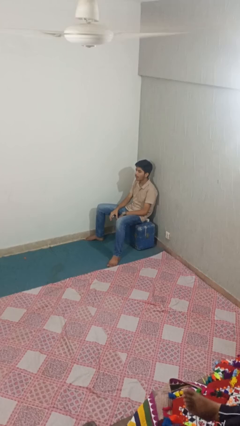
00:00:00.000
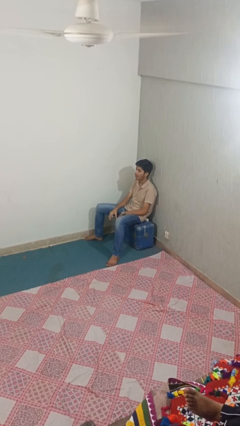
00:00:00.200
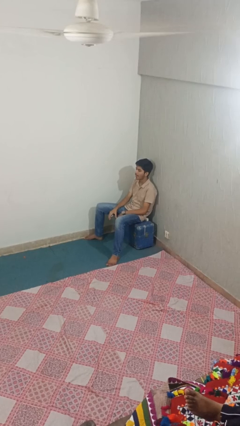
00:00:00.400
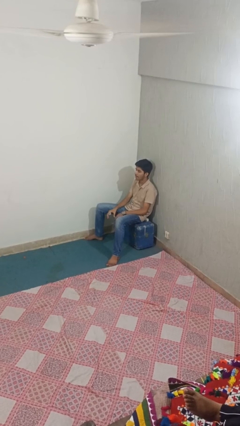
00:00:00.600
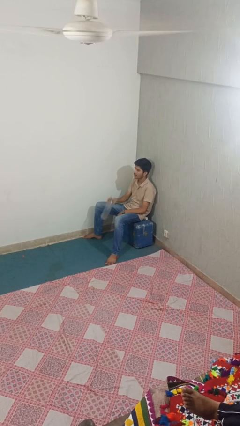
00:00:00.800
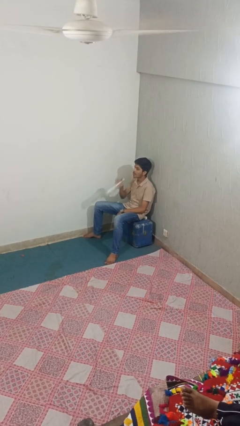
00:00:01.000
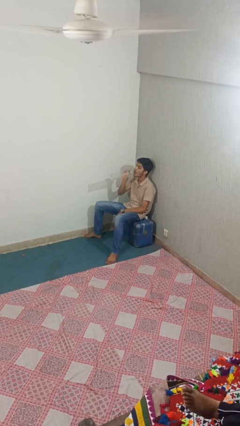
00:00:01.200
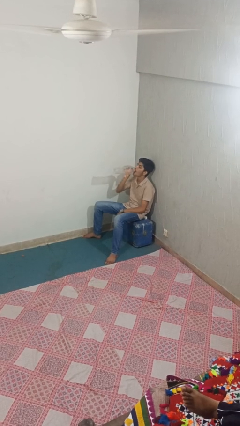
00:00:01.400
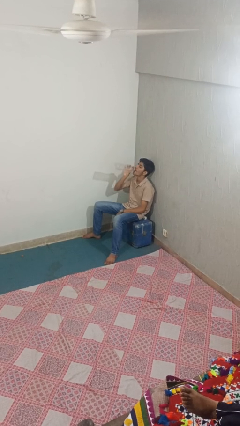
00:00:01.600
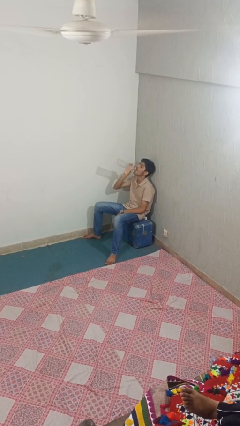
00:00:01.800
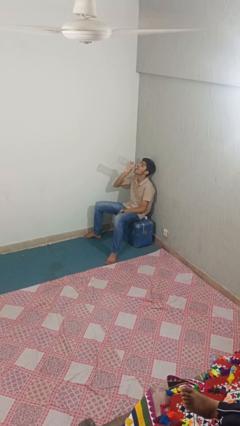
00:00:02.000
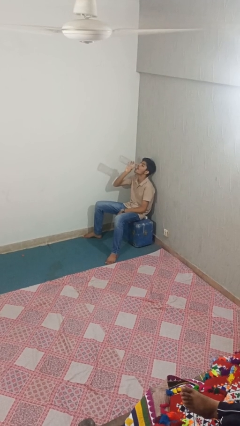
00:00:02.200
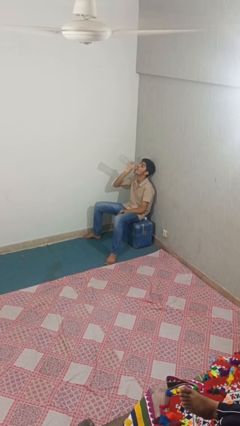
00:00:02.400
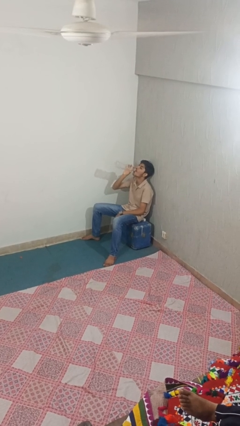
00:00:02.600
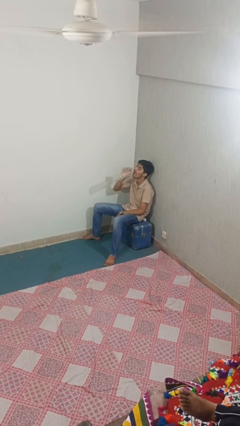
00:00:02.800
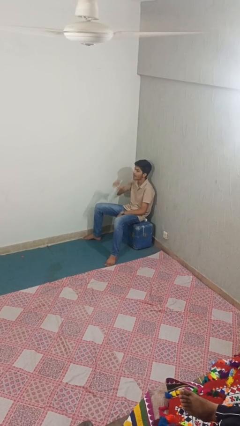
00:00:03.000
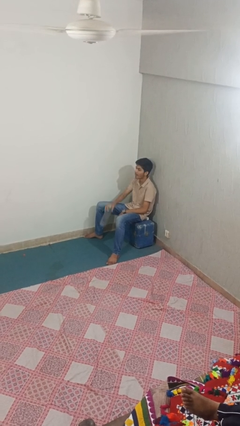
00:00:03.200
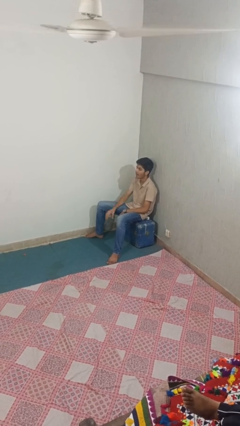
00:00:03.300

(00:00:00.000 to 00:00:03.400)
person drinks from bottle

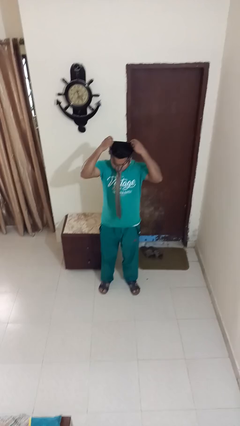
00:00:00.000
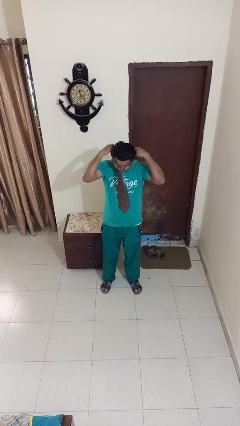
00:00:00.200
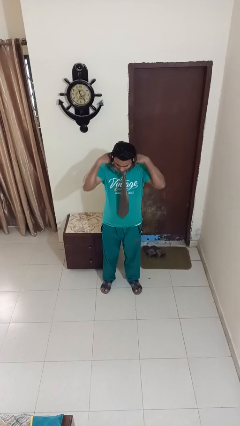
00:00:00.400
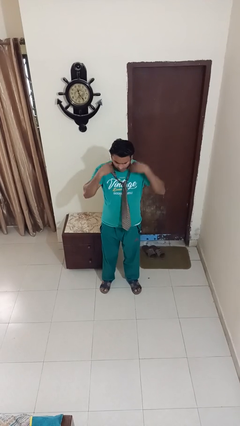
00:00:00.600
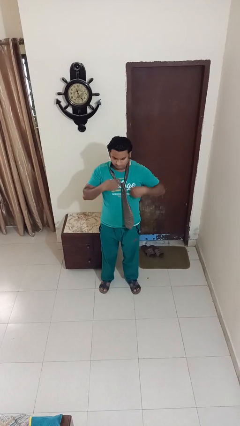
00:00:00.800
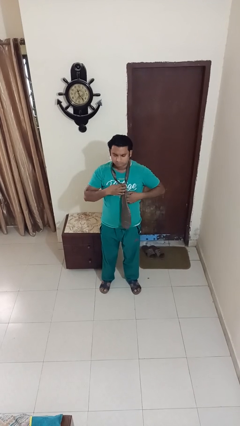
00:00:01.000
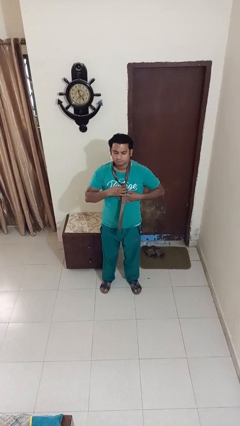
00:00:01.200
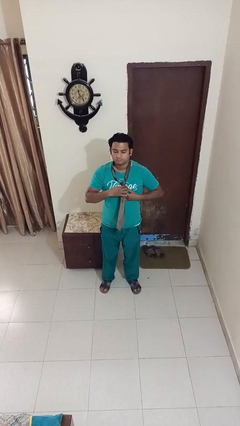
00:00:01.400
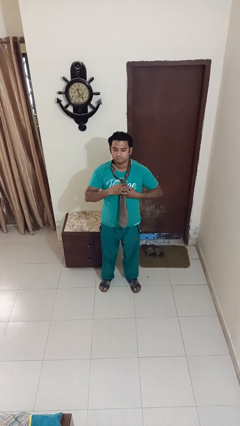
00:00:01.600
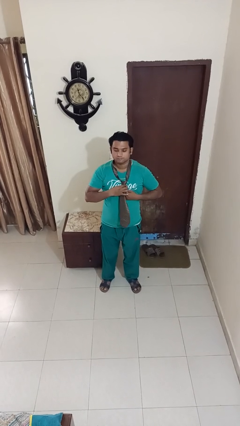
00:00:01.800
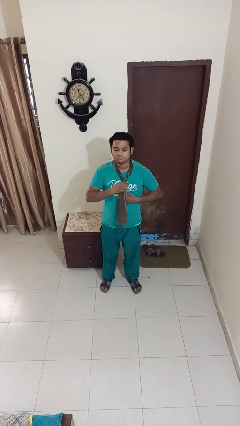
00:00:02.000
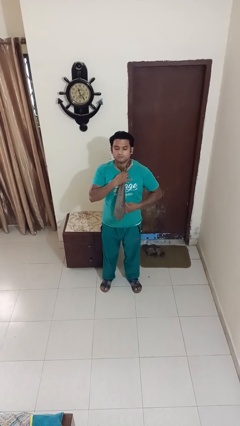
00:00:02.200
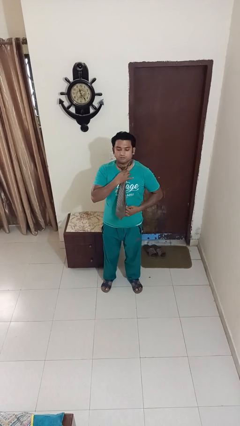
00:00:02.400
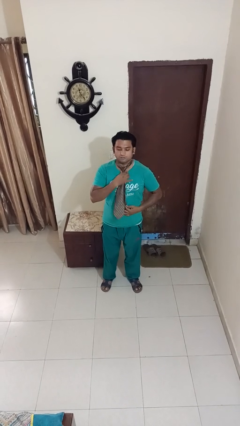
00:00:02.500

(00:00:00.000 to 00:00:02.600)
person puts on necktie

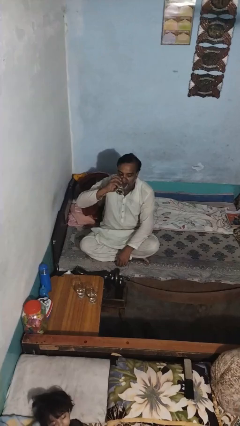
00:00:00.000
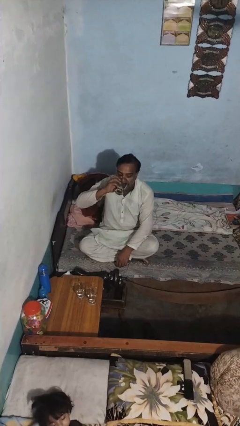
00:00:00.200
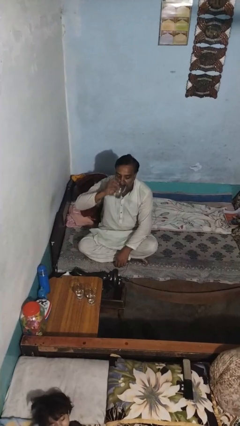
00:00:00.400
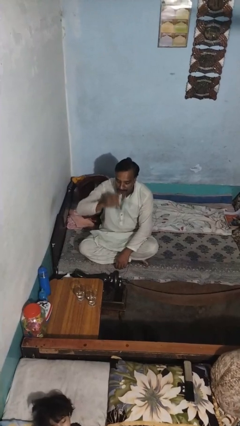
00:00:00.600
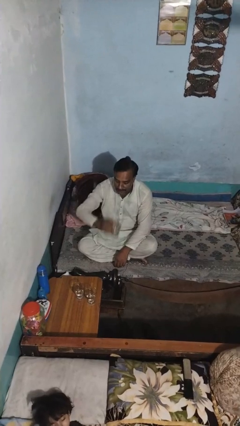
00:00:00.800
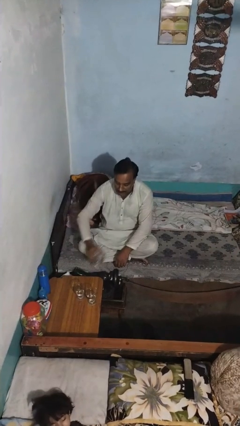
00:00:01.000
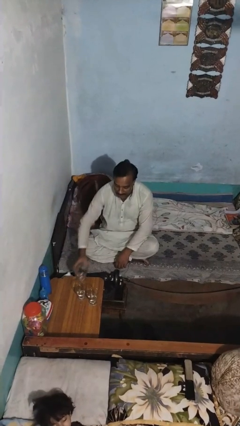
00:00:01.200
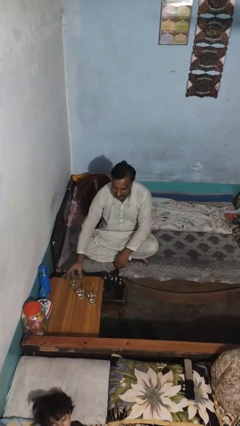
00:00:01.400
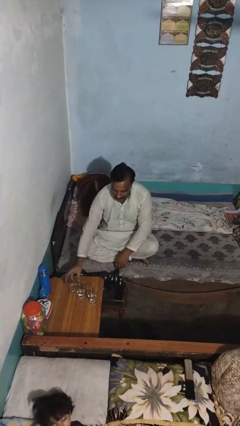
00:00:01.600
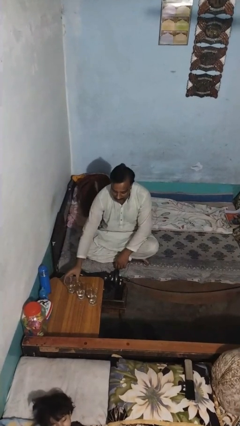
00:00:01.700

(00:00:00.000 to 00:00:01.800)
person puts down object on table

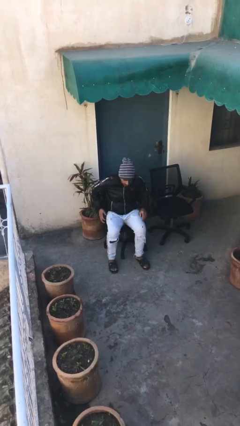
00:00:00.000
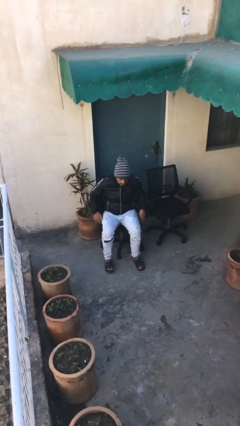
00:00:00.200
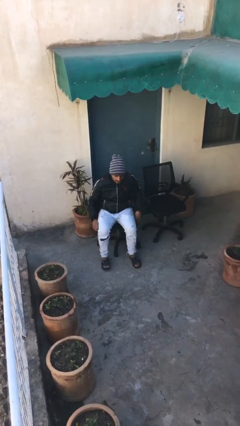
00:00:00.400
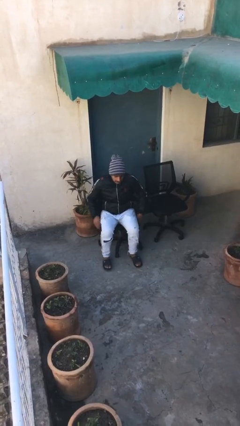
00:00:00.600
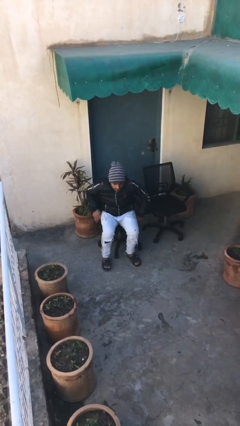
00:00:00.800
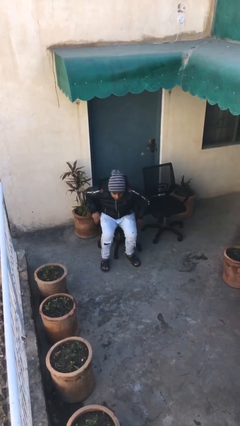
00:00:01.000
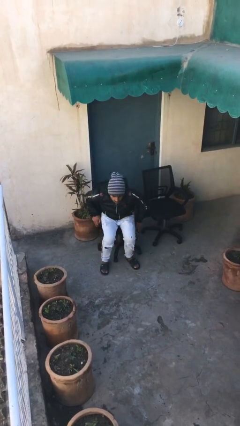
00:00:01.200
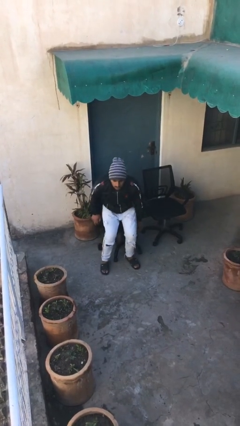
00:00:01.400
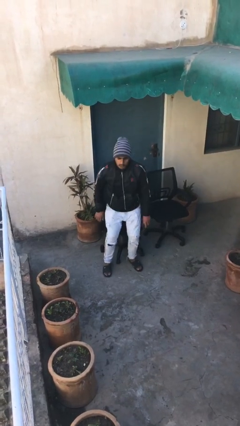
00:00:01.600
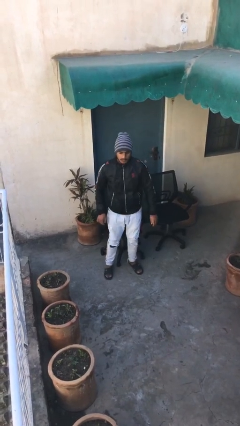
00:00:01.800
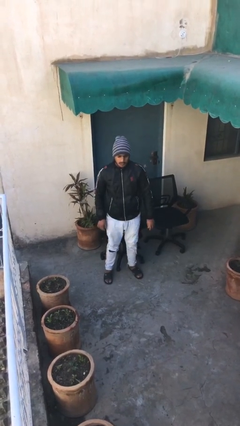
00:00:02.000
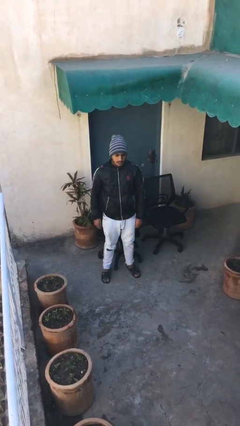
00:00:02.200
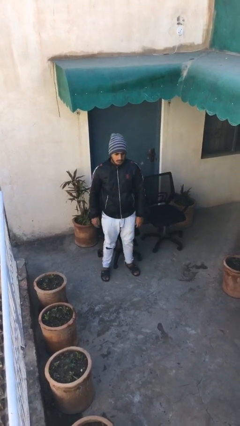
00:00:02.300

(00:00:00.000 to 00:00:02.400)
person stands up

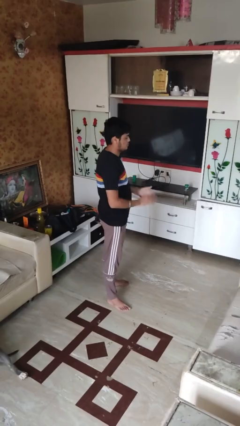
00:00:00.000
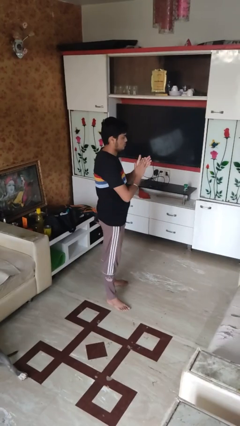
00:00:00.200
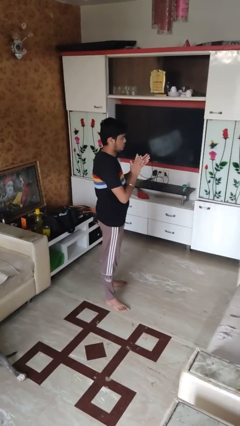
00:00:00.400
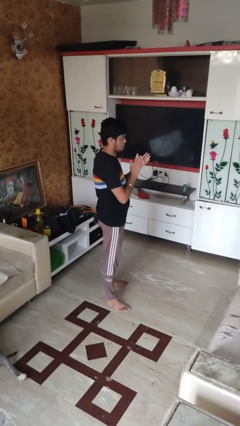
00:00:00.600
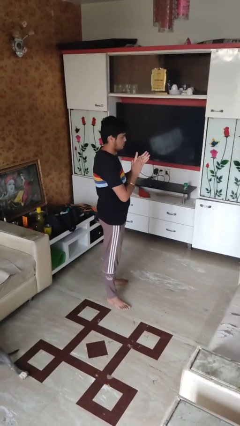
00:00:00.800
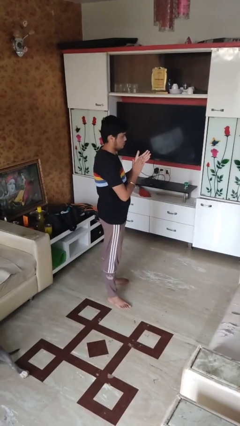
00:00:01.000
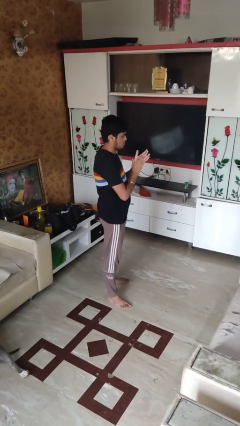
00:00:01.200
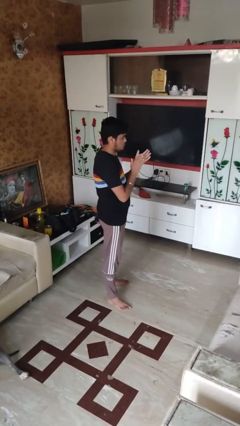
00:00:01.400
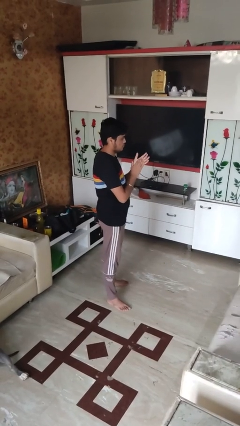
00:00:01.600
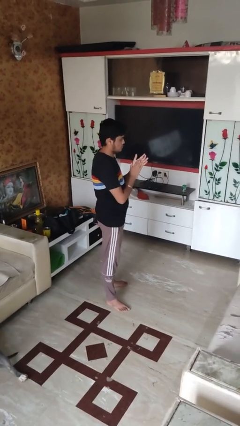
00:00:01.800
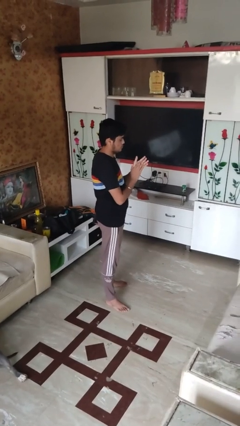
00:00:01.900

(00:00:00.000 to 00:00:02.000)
person claps hands

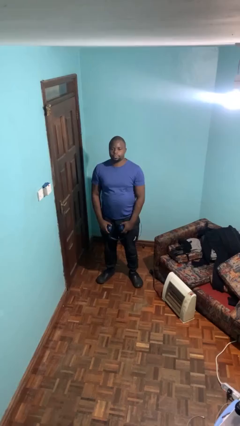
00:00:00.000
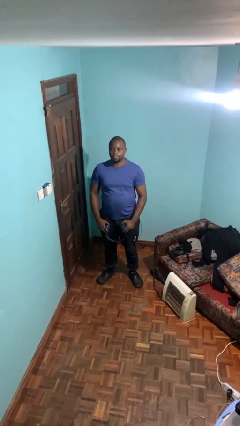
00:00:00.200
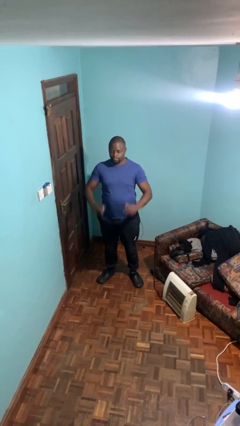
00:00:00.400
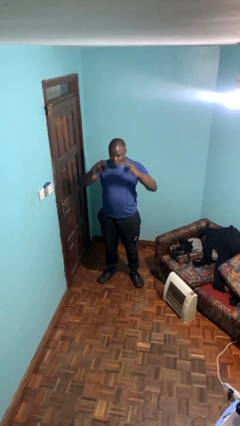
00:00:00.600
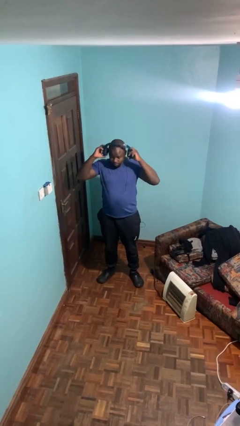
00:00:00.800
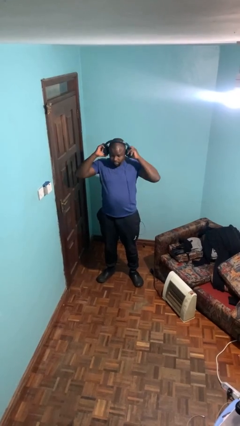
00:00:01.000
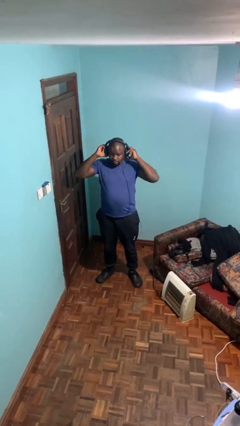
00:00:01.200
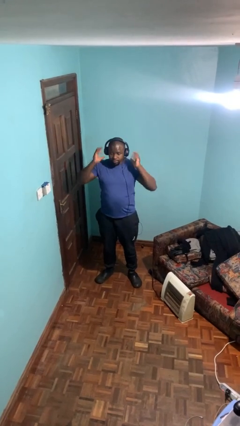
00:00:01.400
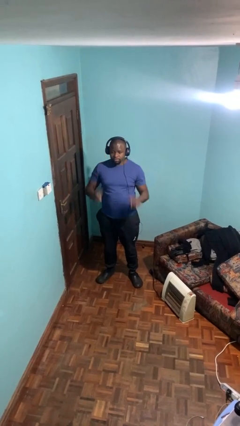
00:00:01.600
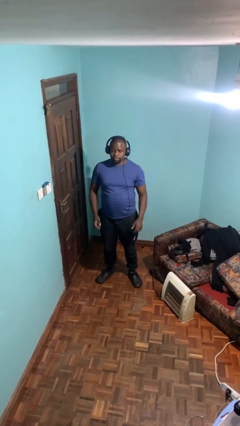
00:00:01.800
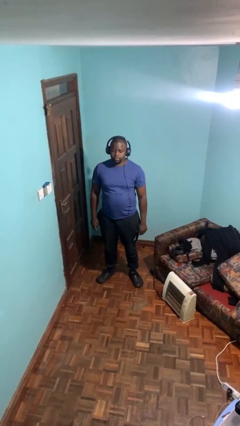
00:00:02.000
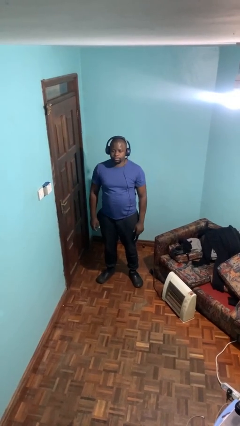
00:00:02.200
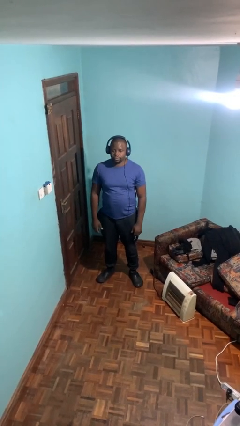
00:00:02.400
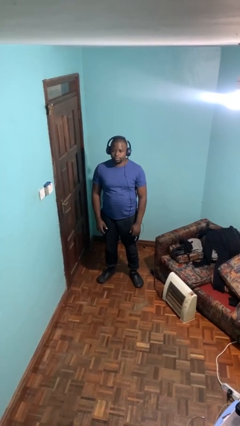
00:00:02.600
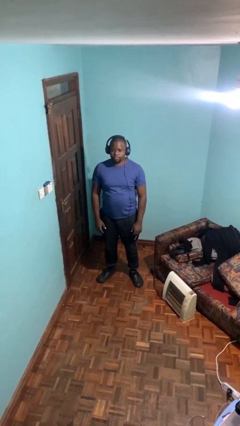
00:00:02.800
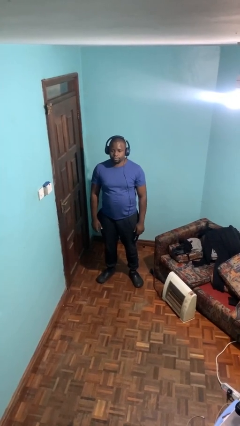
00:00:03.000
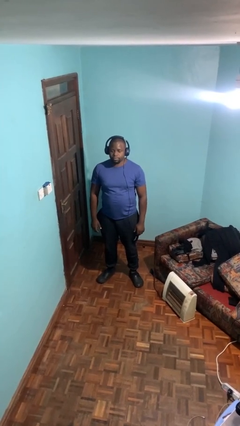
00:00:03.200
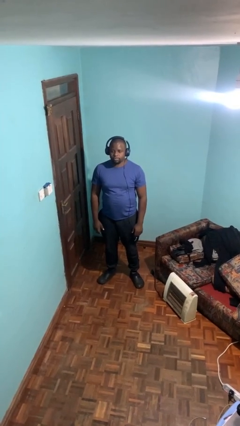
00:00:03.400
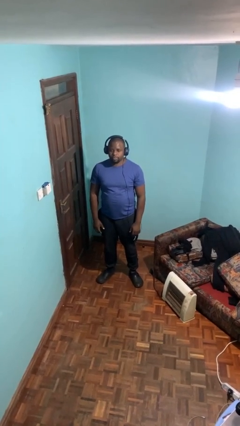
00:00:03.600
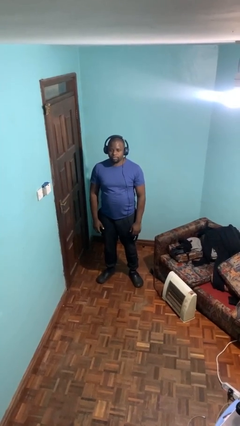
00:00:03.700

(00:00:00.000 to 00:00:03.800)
person puts on headphones

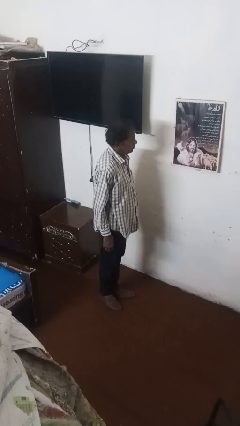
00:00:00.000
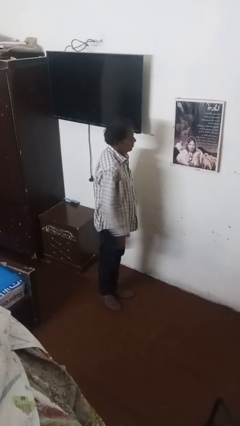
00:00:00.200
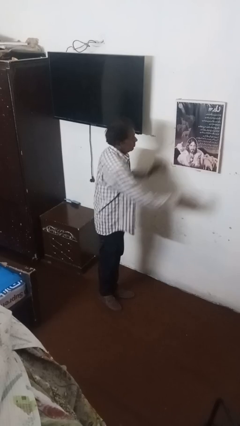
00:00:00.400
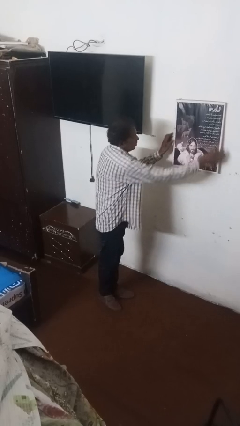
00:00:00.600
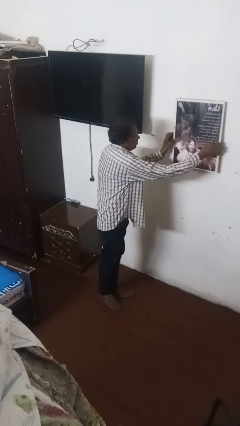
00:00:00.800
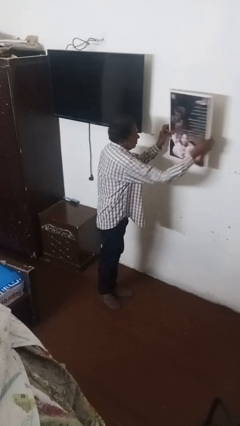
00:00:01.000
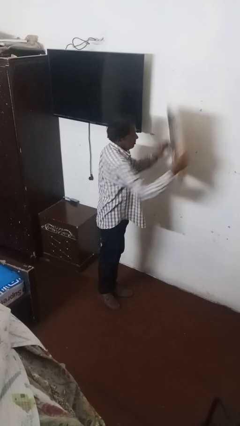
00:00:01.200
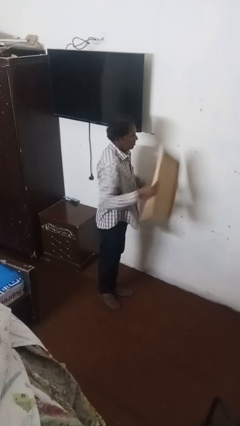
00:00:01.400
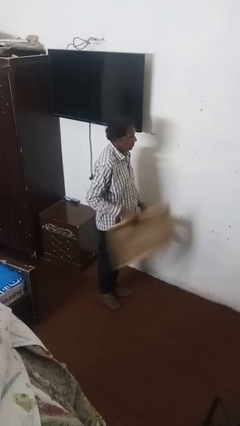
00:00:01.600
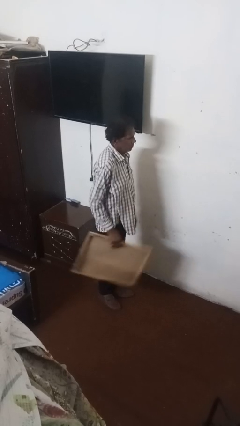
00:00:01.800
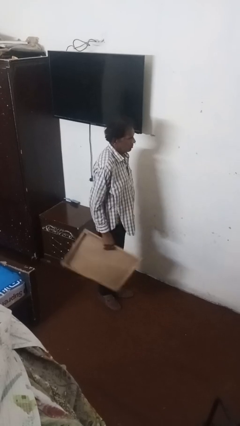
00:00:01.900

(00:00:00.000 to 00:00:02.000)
person takes down picture frame
